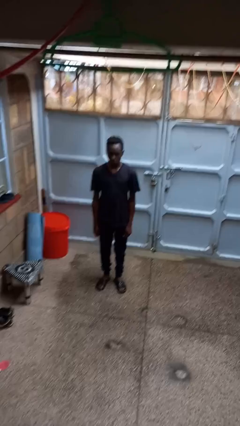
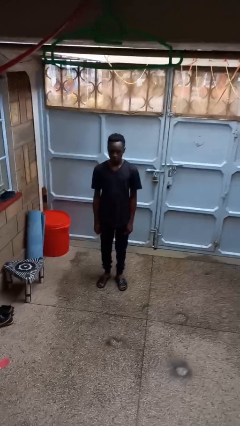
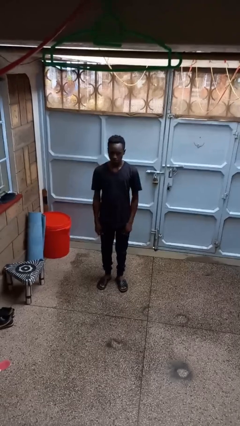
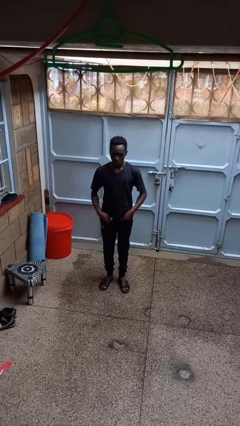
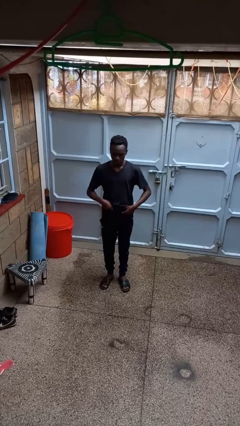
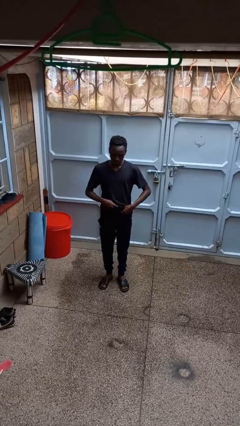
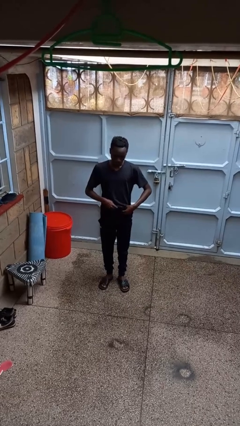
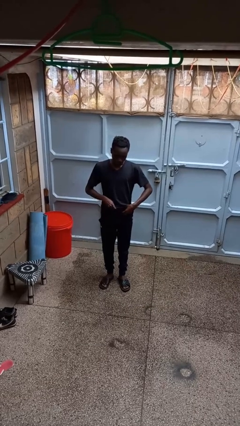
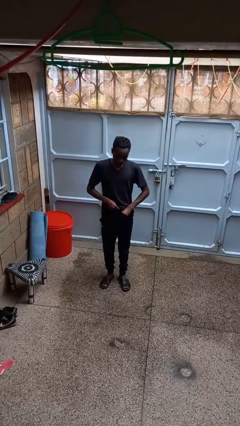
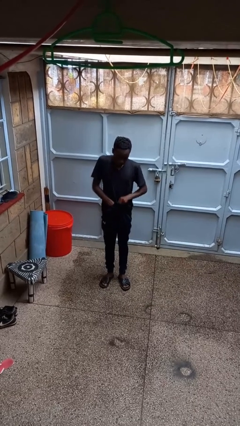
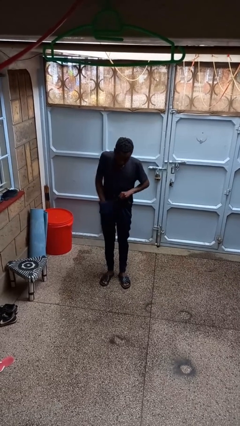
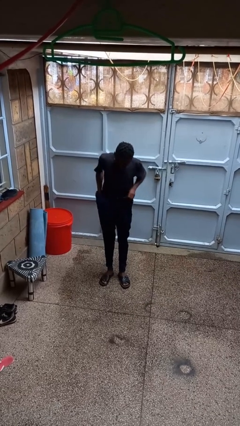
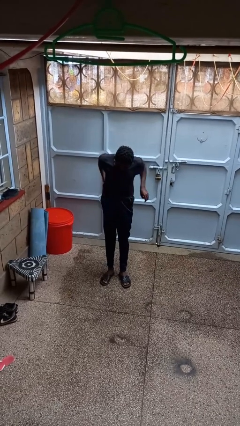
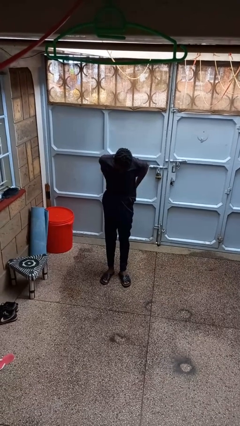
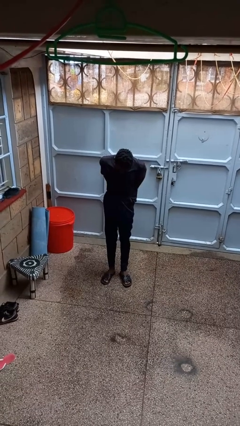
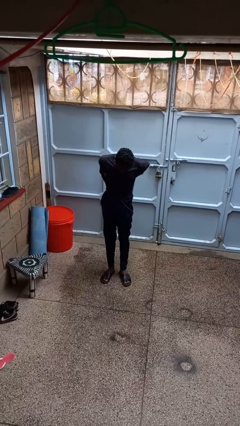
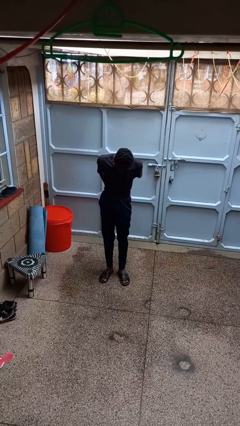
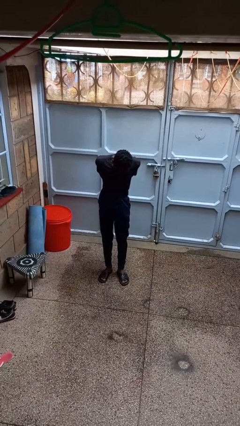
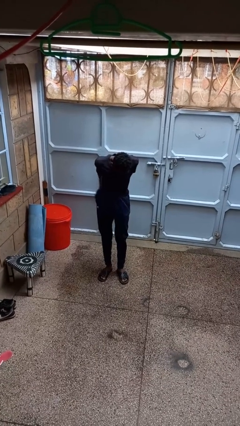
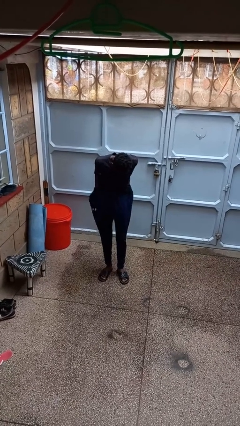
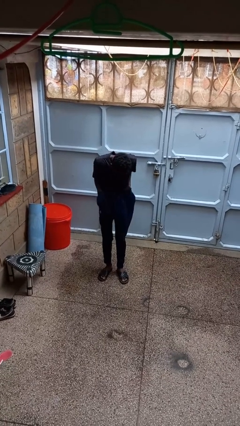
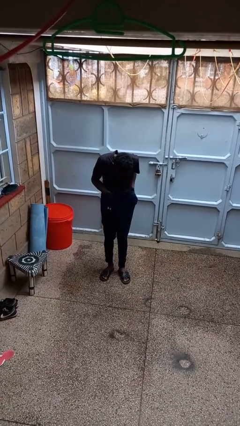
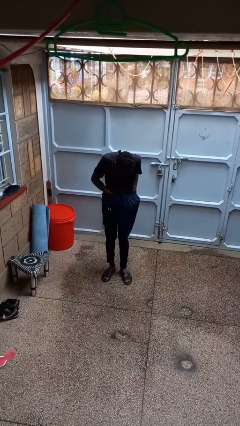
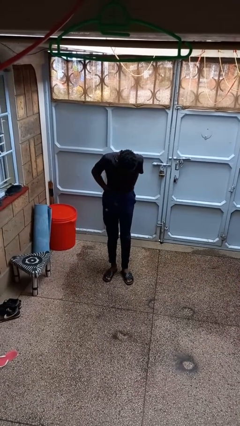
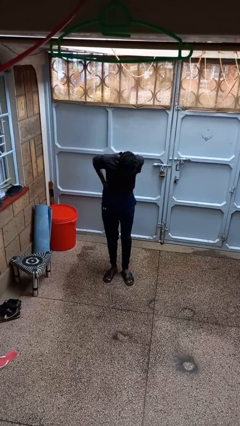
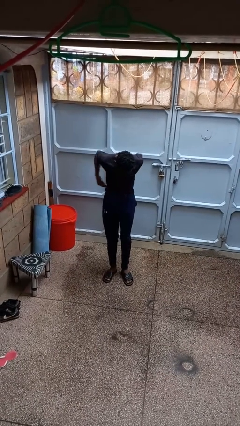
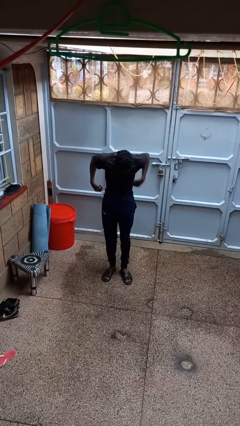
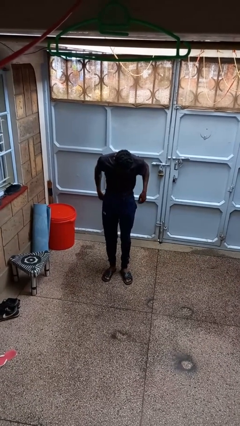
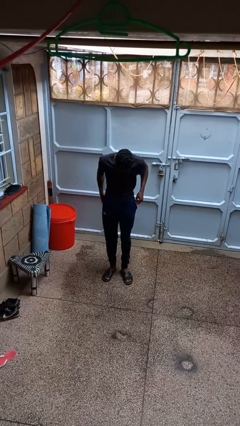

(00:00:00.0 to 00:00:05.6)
person tucks in shirt

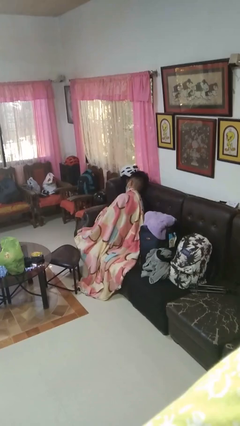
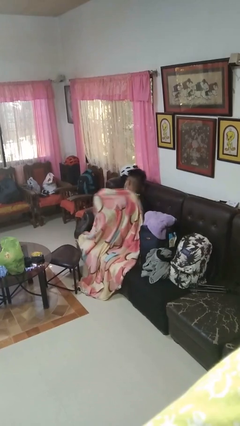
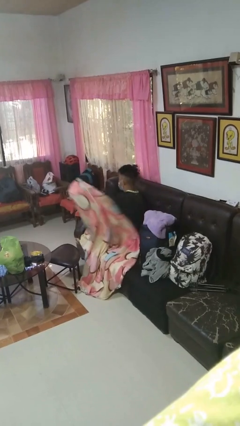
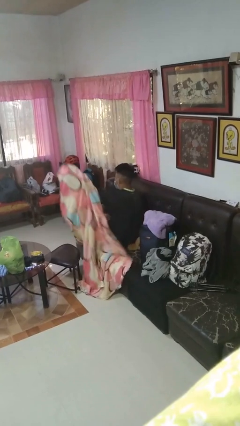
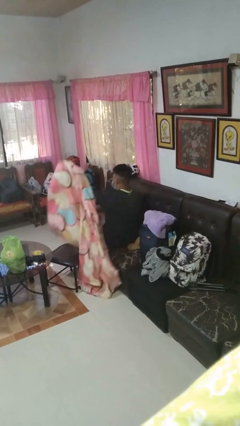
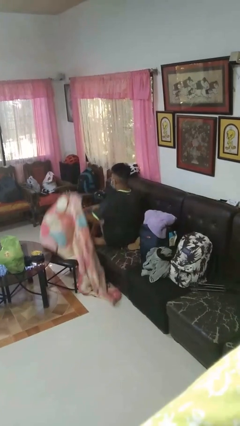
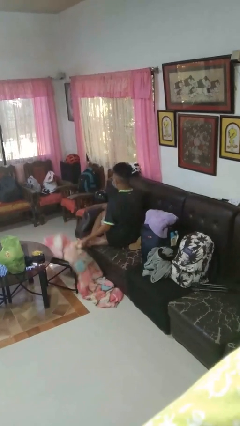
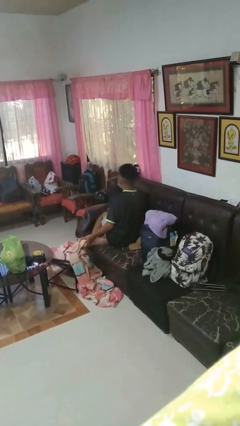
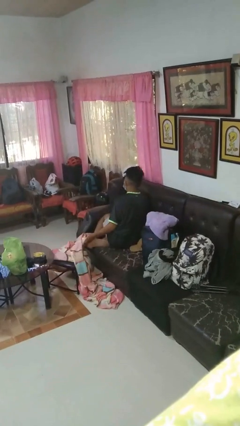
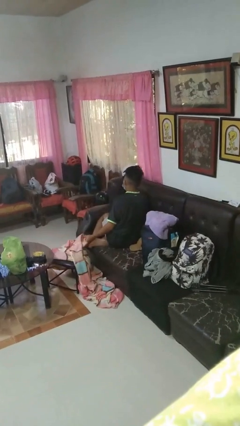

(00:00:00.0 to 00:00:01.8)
person uncovers with blanket

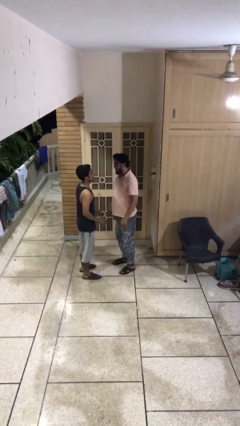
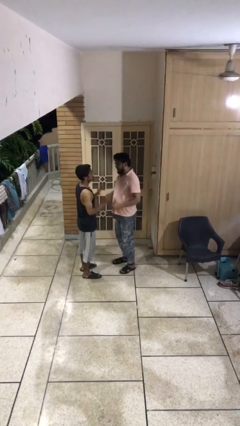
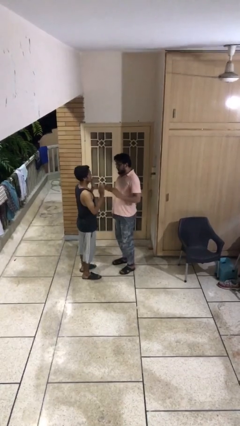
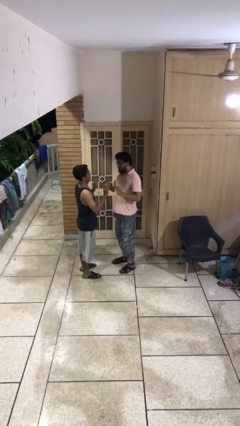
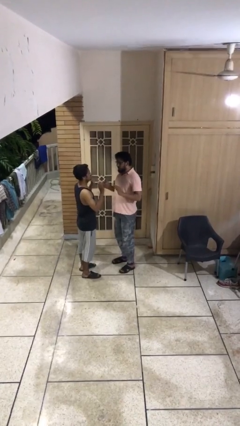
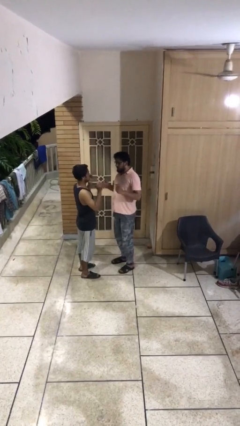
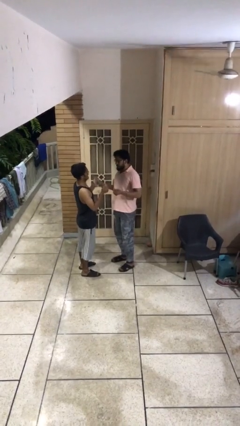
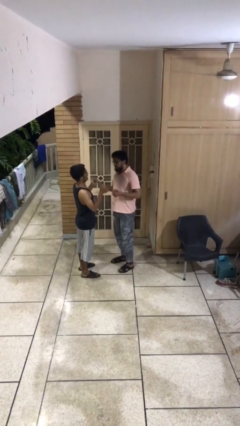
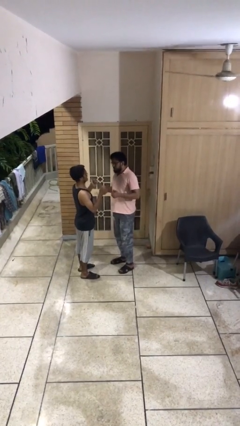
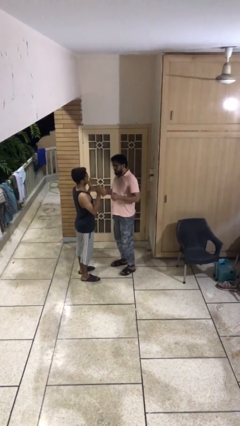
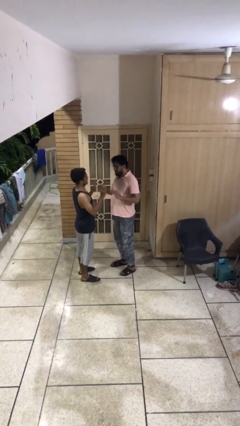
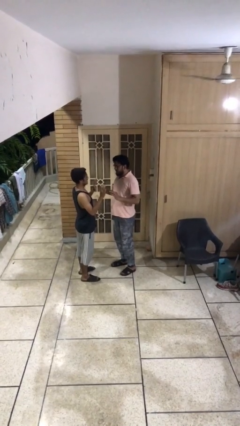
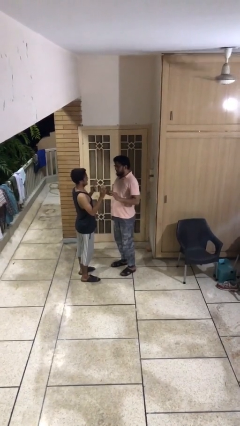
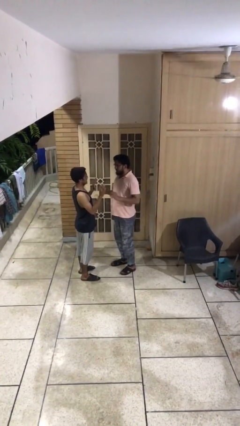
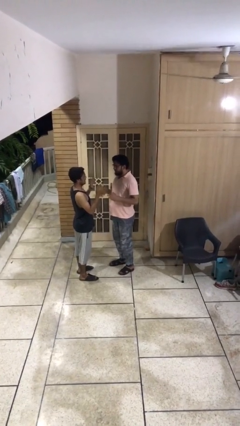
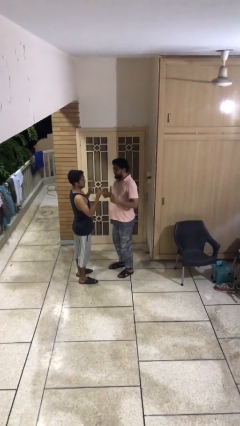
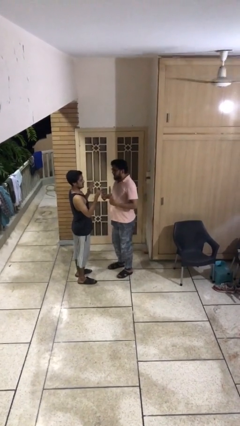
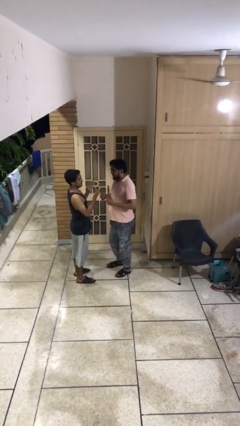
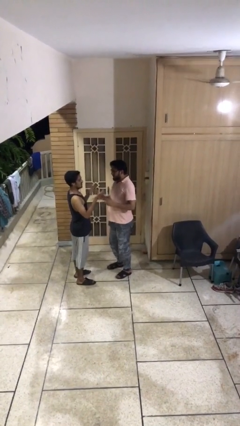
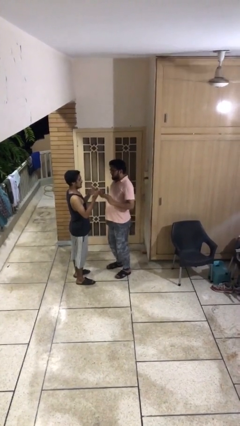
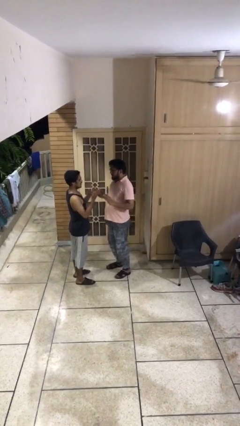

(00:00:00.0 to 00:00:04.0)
person talks to person

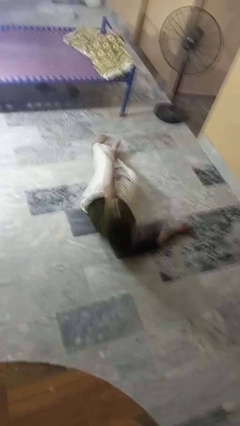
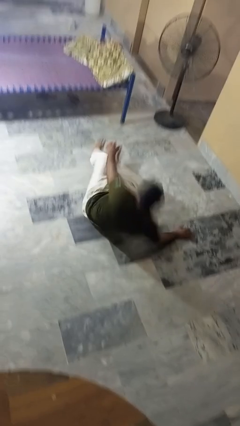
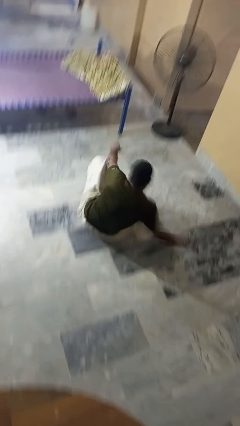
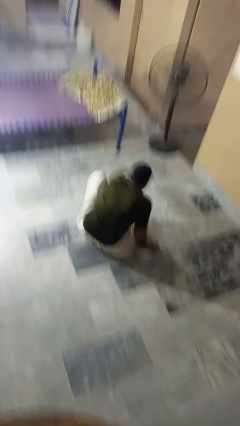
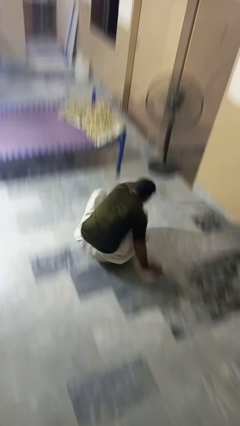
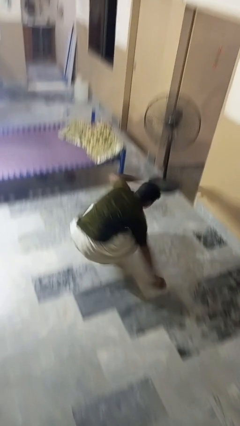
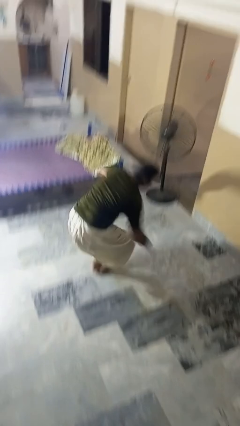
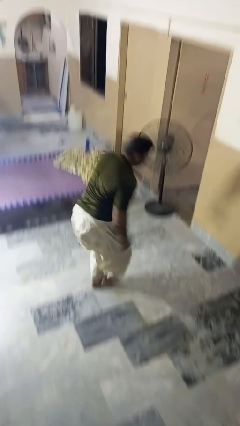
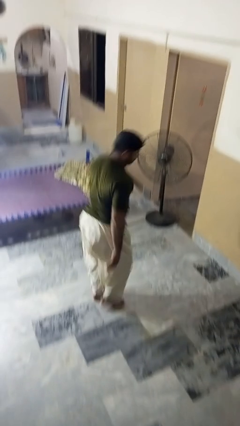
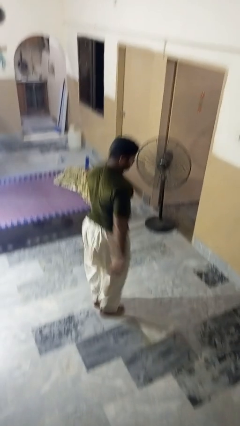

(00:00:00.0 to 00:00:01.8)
person stands up from floor

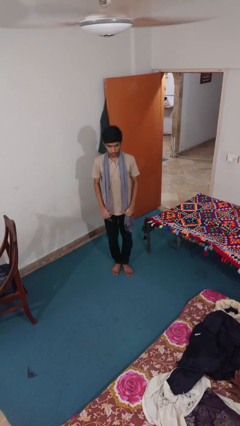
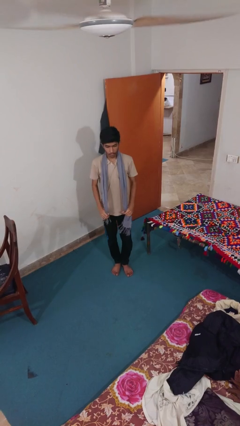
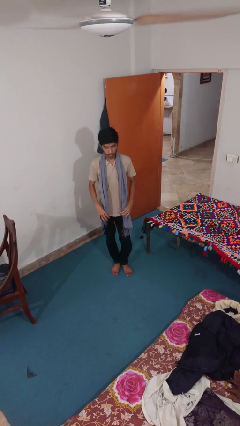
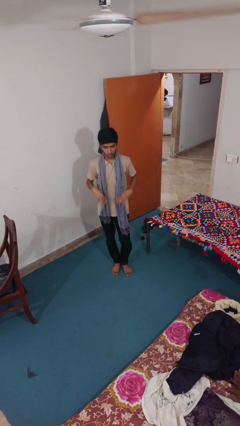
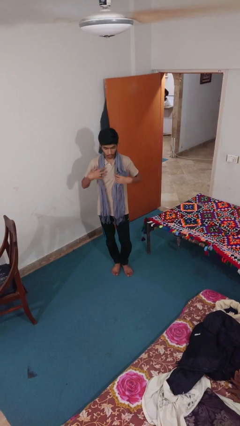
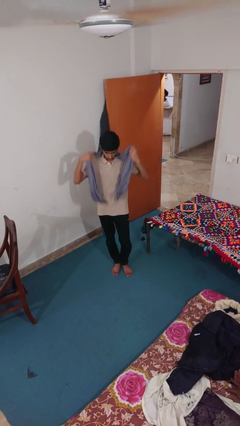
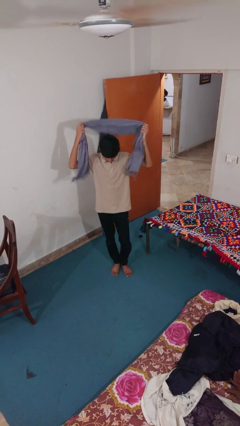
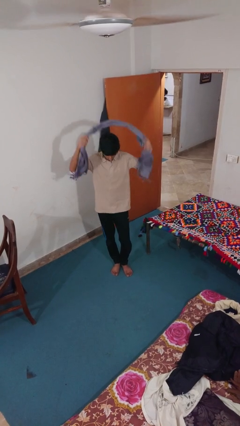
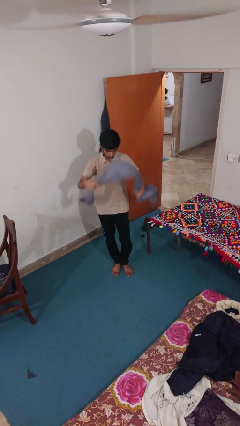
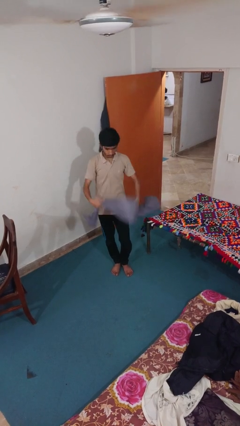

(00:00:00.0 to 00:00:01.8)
person takes off scarf

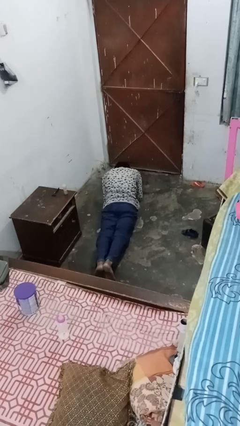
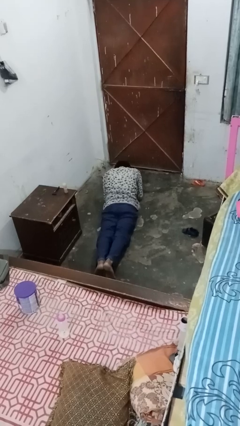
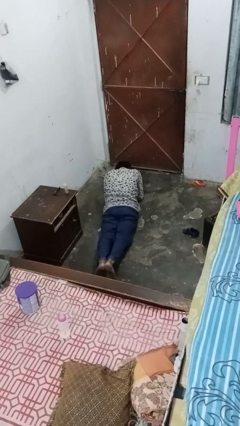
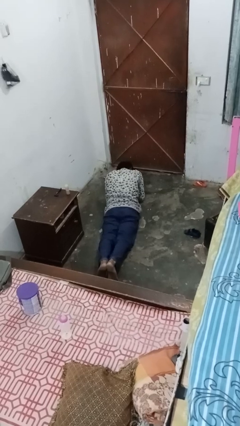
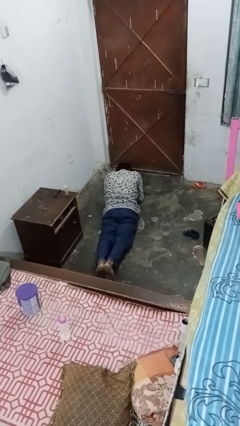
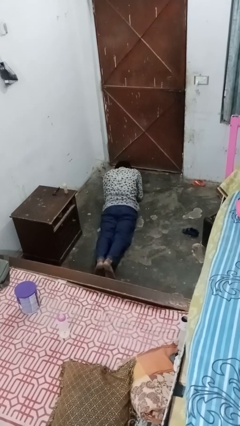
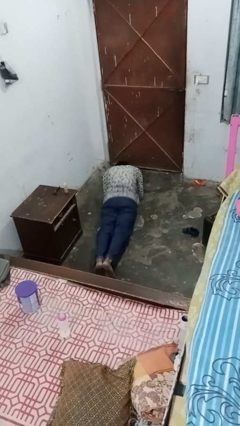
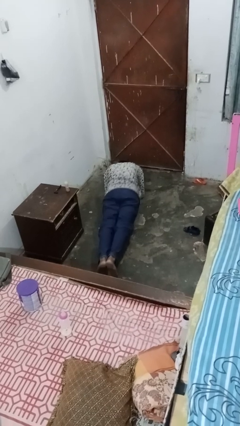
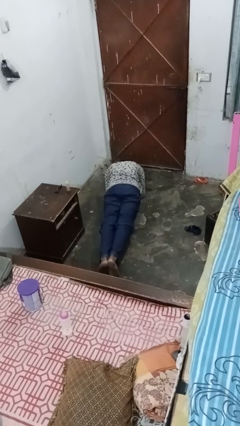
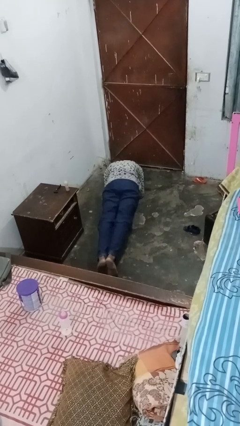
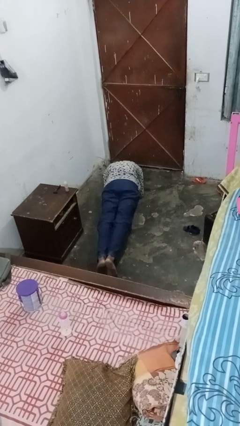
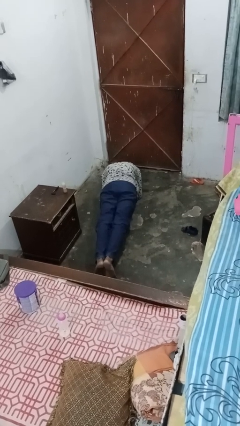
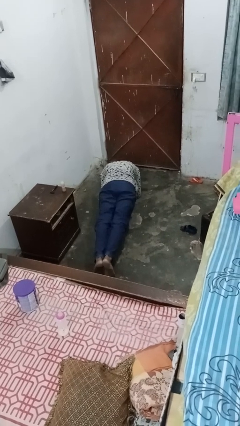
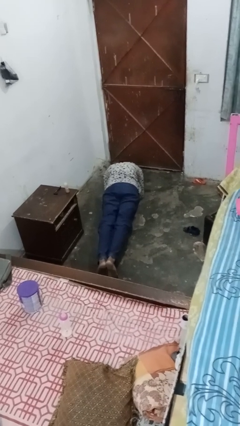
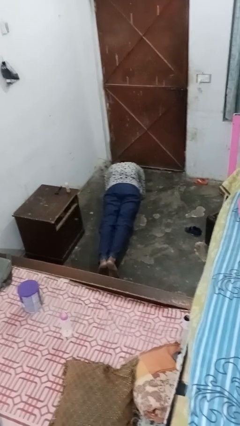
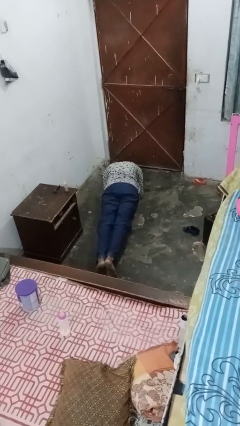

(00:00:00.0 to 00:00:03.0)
person exercises with plank
